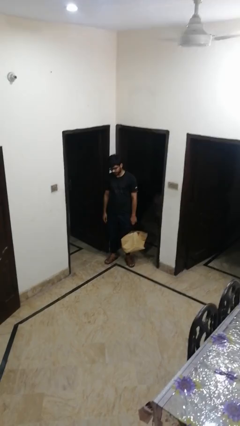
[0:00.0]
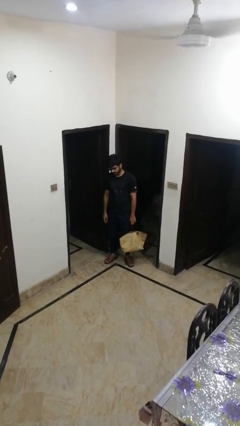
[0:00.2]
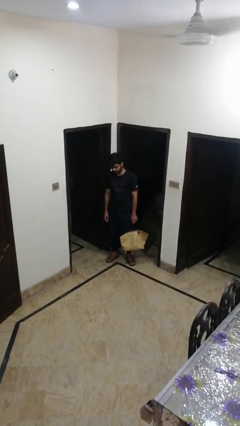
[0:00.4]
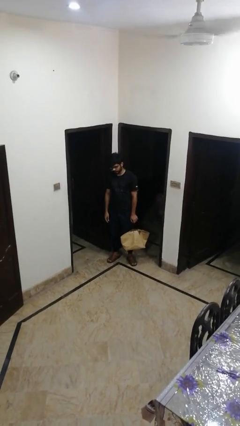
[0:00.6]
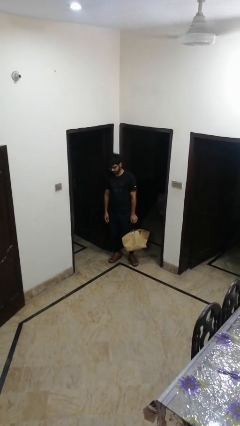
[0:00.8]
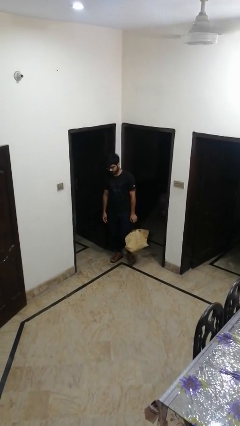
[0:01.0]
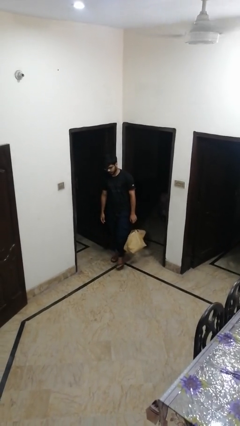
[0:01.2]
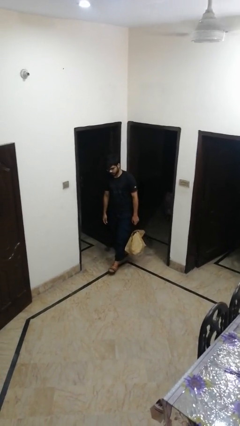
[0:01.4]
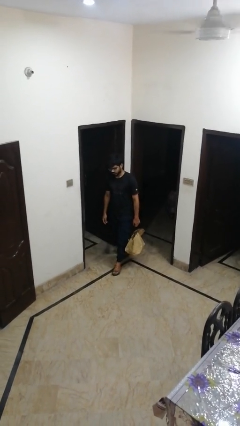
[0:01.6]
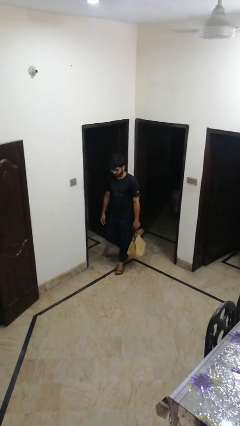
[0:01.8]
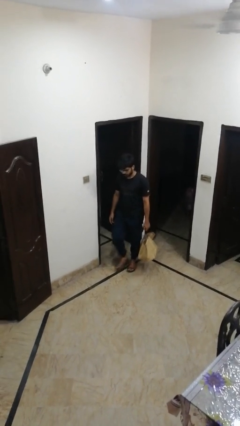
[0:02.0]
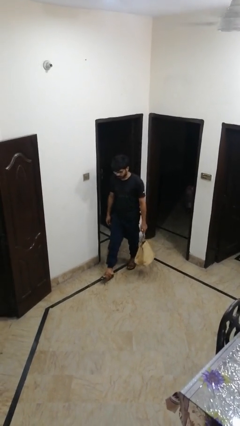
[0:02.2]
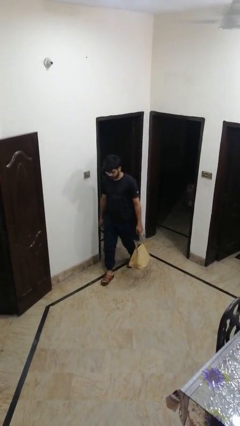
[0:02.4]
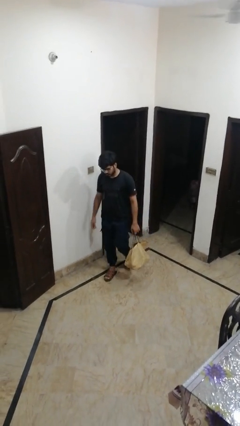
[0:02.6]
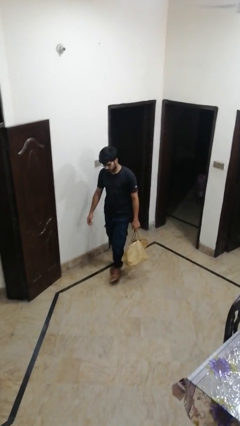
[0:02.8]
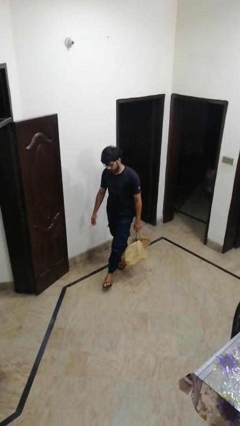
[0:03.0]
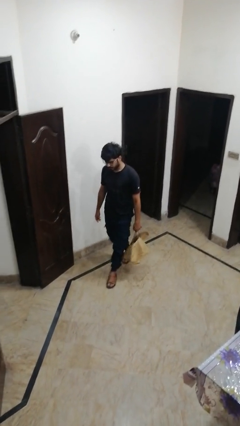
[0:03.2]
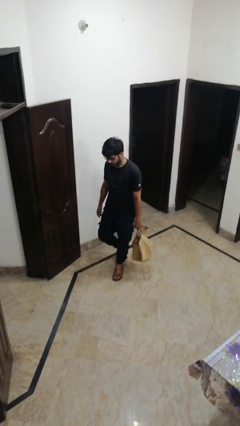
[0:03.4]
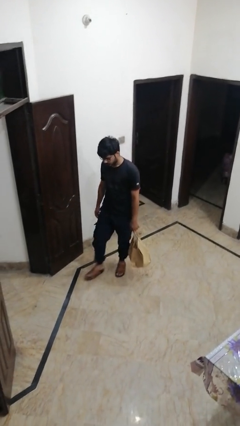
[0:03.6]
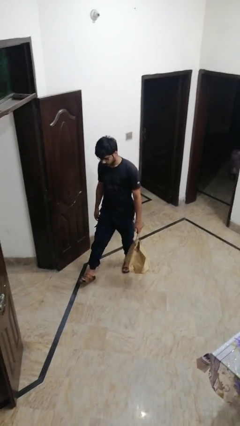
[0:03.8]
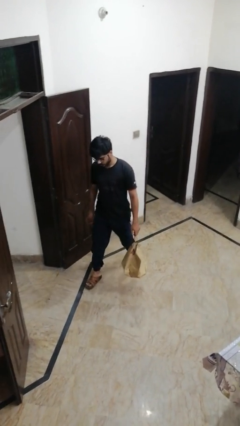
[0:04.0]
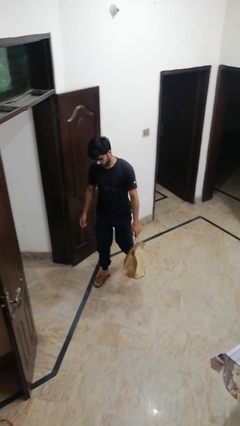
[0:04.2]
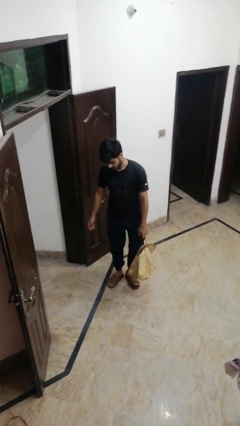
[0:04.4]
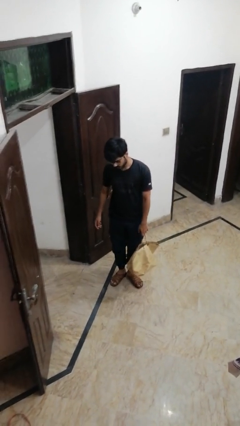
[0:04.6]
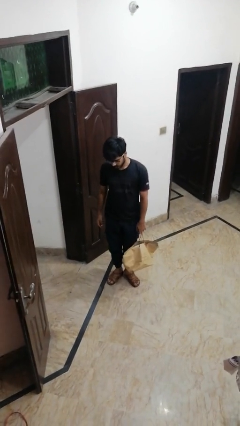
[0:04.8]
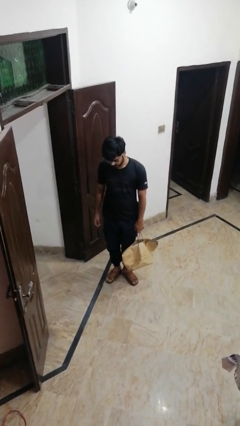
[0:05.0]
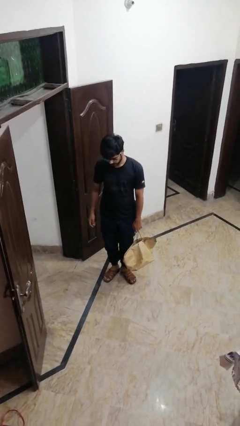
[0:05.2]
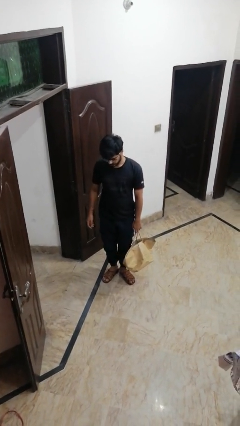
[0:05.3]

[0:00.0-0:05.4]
person carries groceries

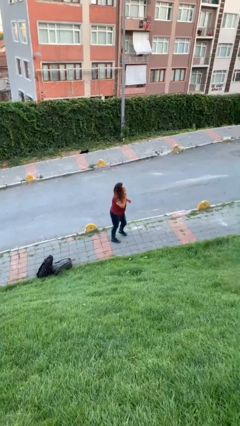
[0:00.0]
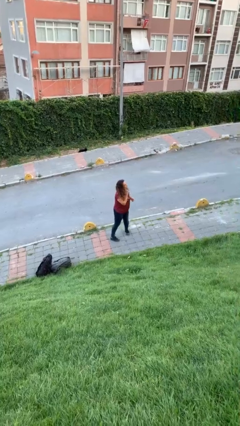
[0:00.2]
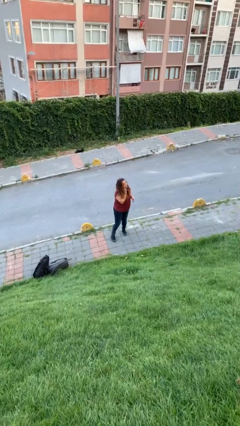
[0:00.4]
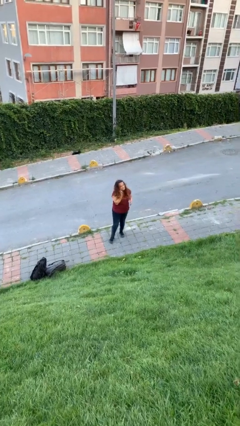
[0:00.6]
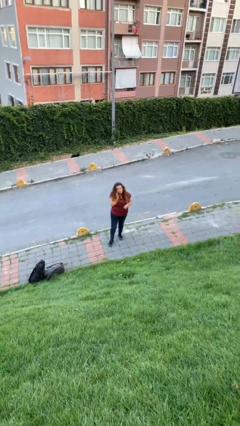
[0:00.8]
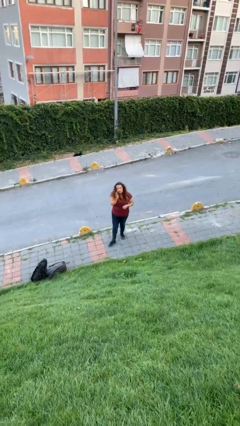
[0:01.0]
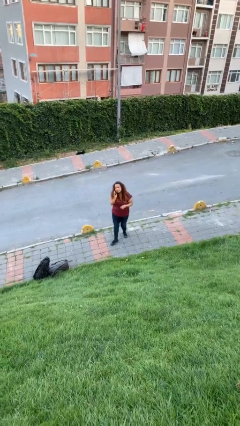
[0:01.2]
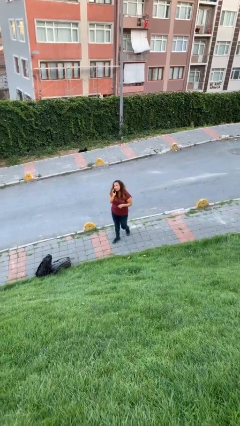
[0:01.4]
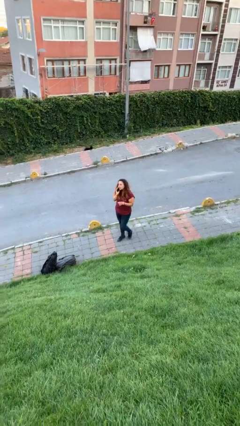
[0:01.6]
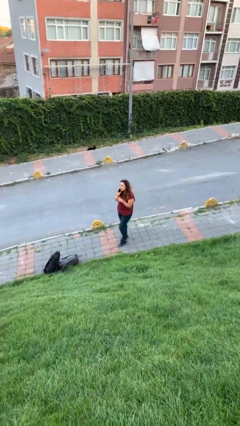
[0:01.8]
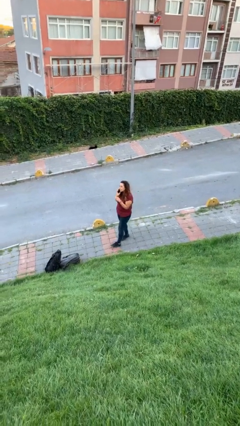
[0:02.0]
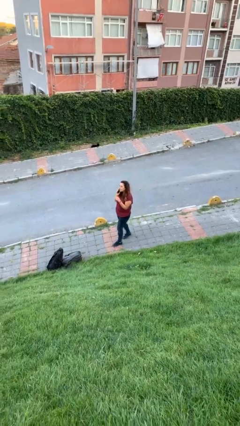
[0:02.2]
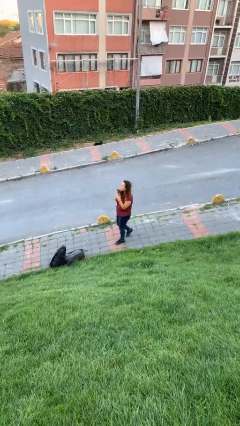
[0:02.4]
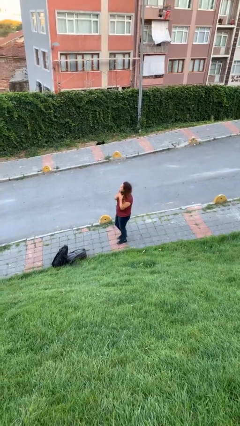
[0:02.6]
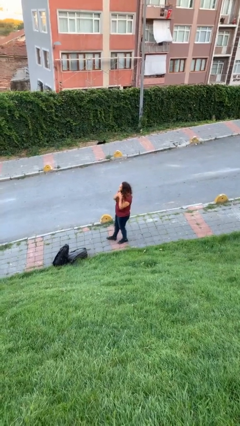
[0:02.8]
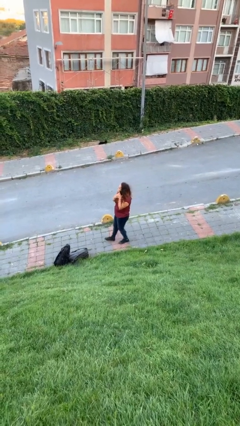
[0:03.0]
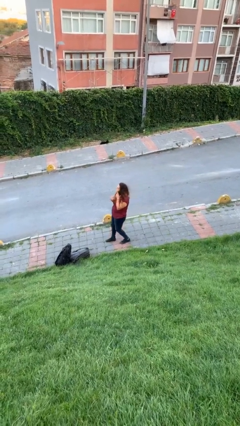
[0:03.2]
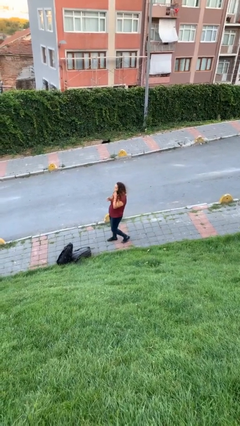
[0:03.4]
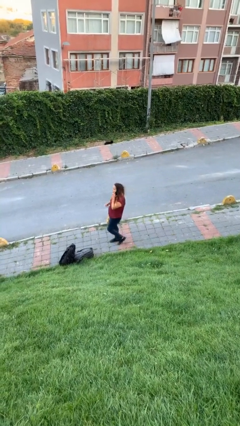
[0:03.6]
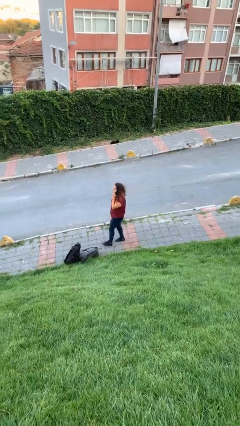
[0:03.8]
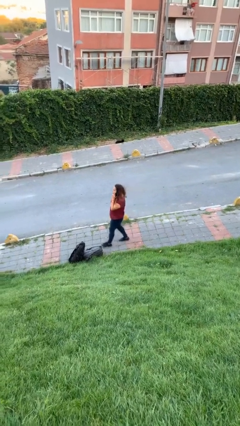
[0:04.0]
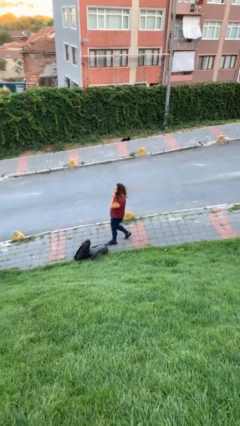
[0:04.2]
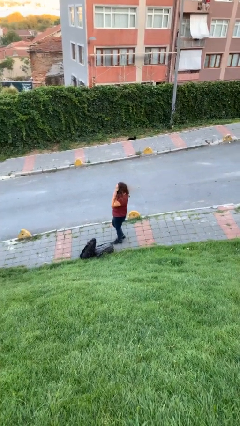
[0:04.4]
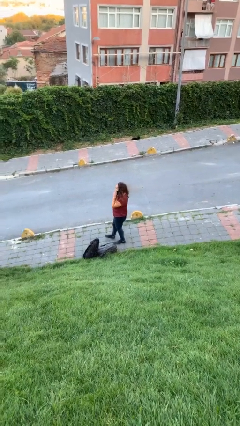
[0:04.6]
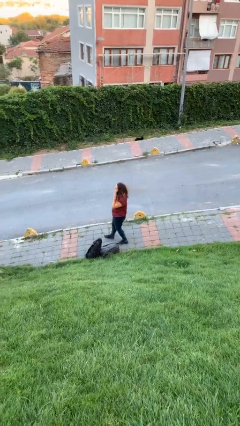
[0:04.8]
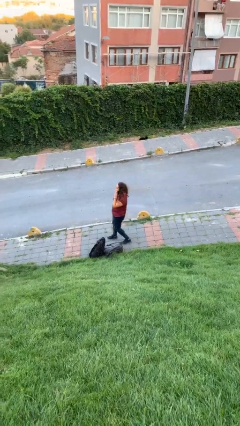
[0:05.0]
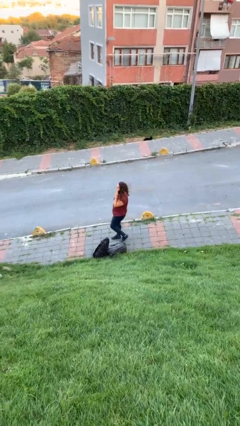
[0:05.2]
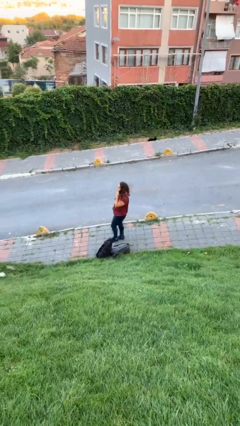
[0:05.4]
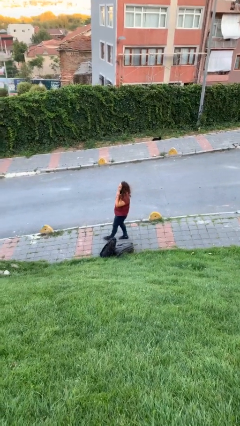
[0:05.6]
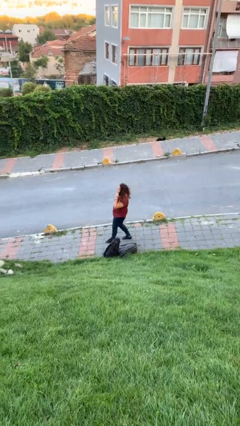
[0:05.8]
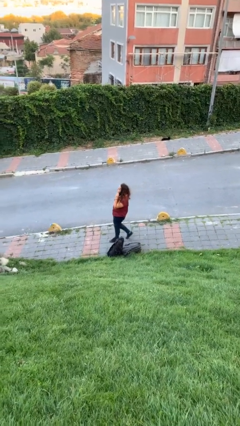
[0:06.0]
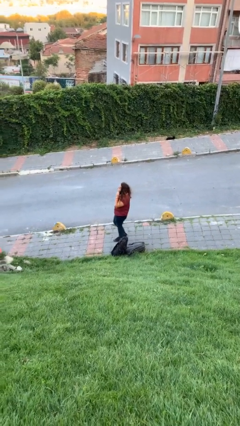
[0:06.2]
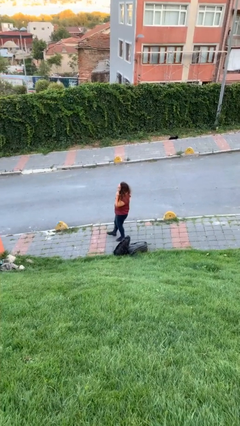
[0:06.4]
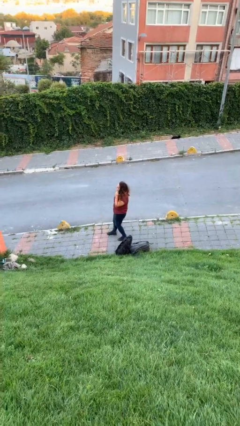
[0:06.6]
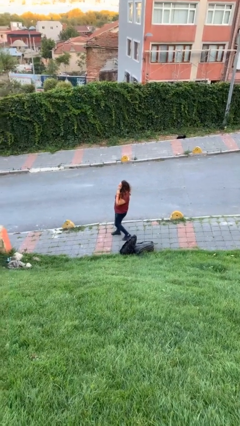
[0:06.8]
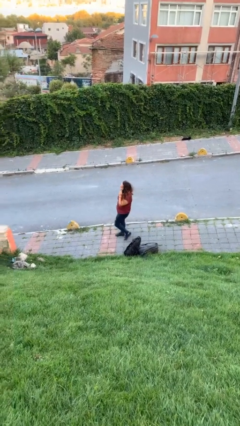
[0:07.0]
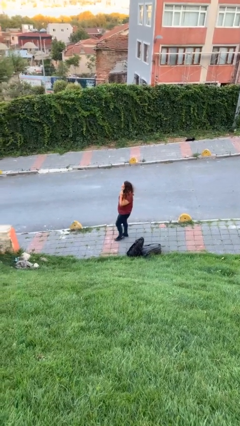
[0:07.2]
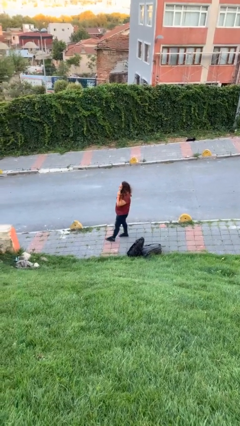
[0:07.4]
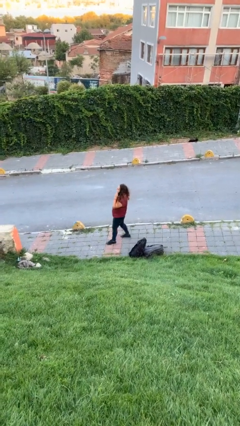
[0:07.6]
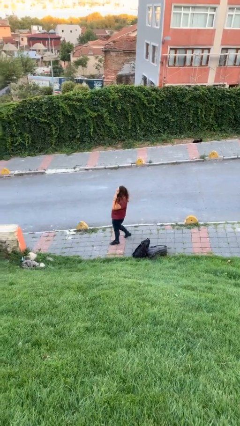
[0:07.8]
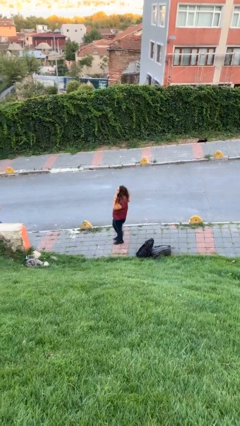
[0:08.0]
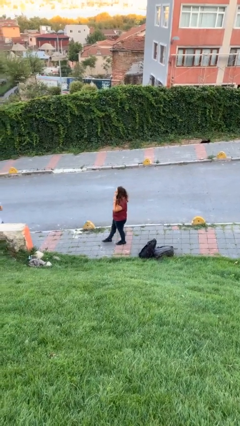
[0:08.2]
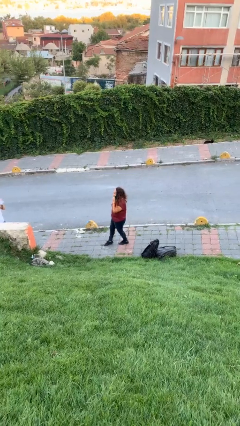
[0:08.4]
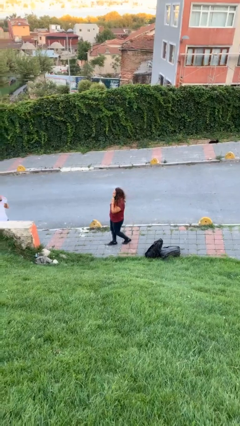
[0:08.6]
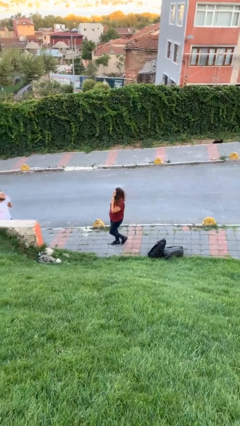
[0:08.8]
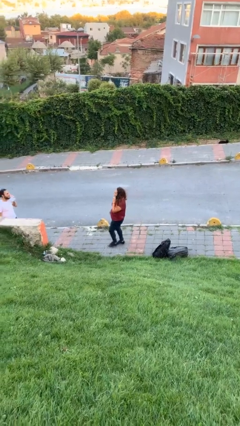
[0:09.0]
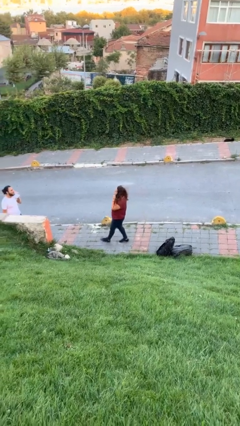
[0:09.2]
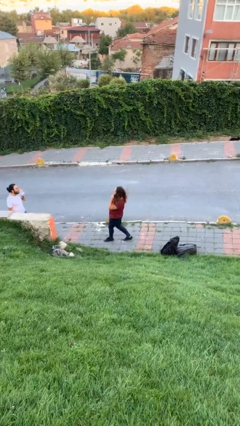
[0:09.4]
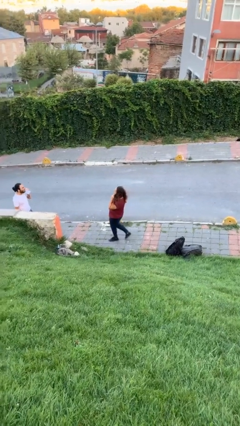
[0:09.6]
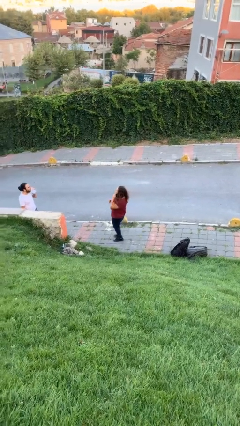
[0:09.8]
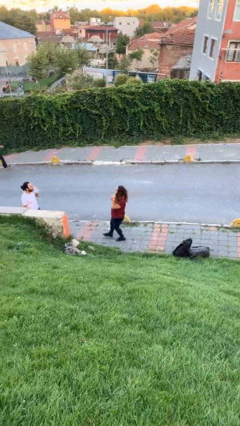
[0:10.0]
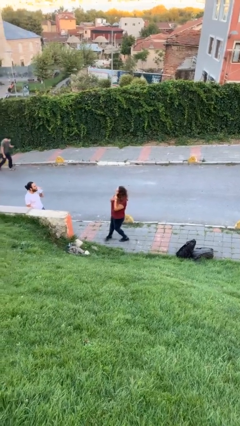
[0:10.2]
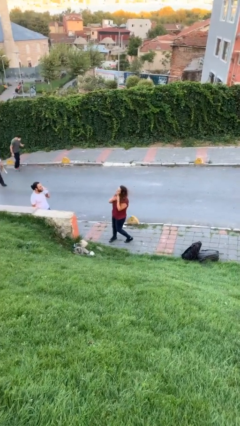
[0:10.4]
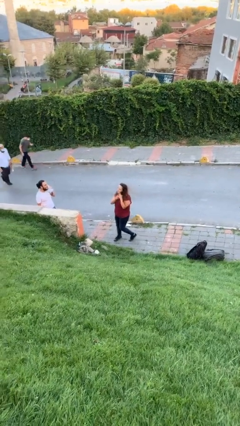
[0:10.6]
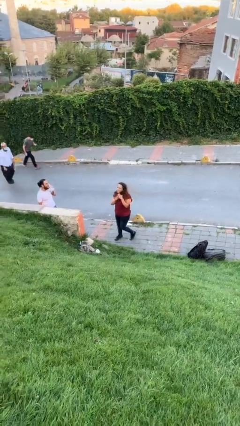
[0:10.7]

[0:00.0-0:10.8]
person talks on phone

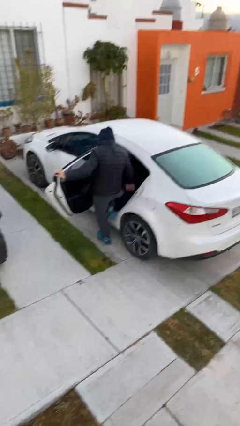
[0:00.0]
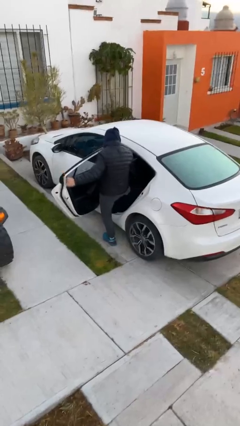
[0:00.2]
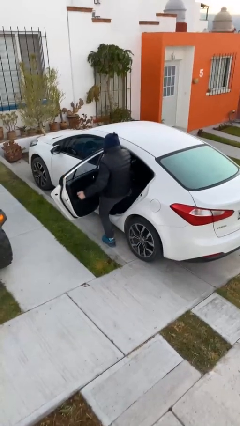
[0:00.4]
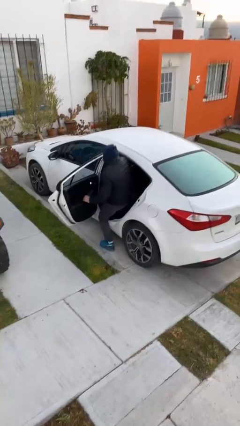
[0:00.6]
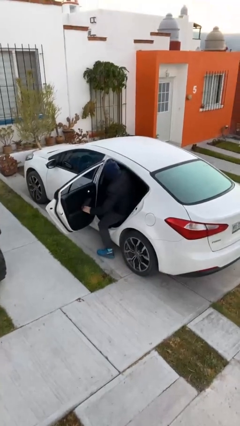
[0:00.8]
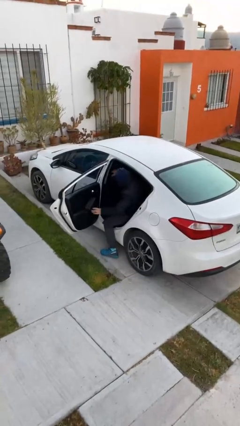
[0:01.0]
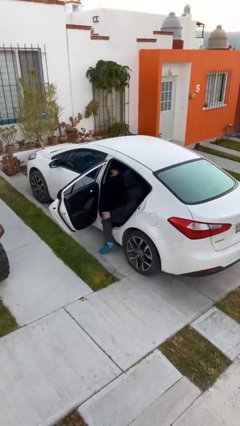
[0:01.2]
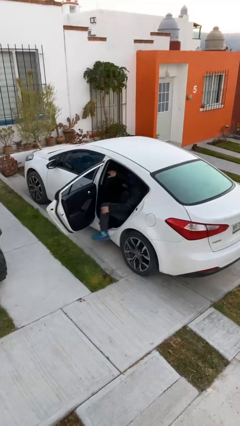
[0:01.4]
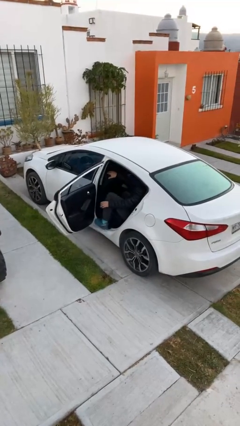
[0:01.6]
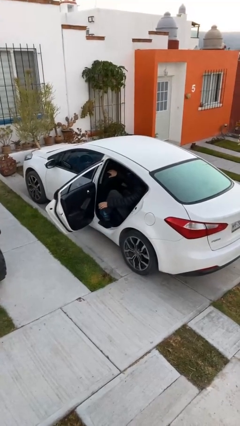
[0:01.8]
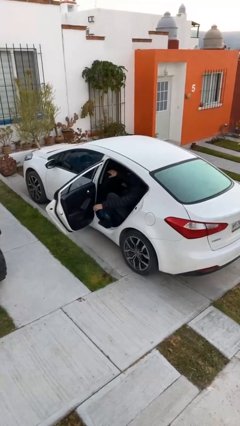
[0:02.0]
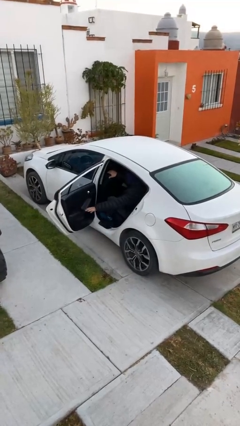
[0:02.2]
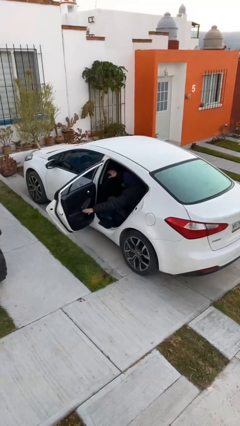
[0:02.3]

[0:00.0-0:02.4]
person enters car
